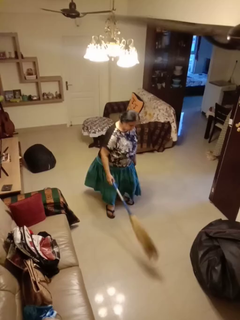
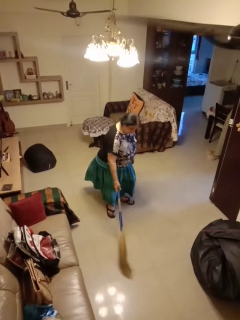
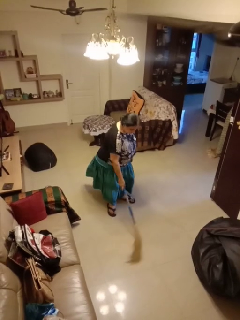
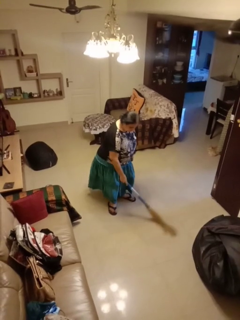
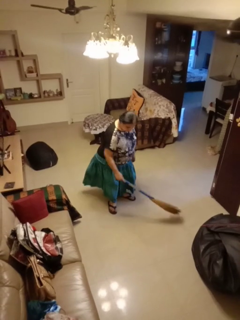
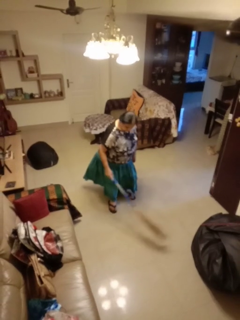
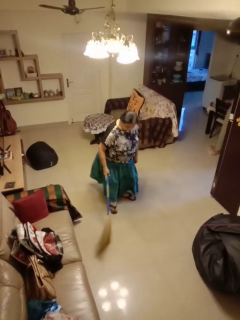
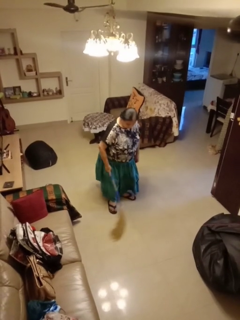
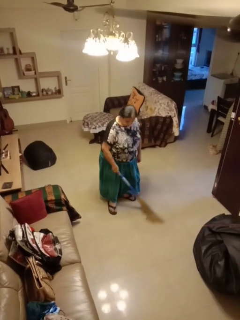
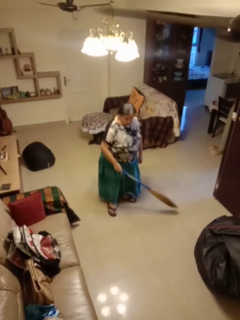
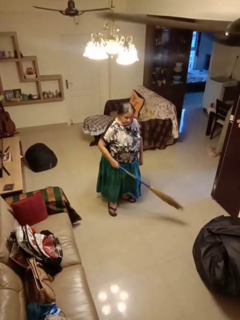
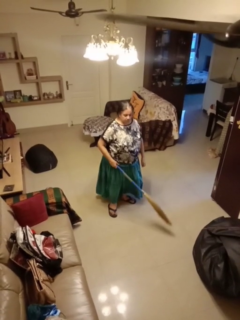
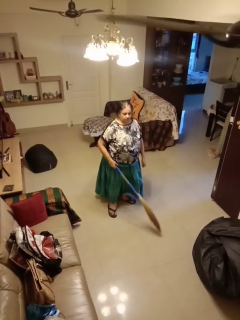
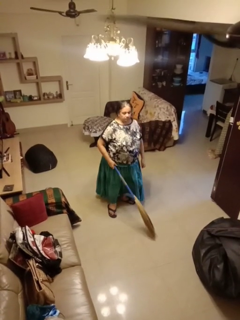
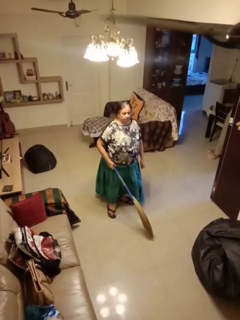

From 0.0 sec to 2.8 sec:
person sweeps floor

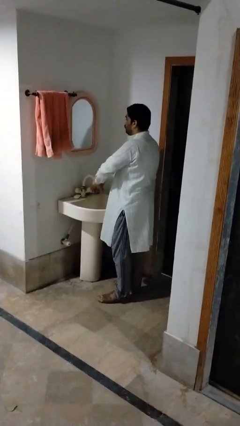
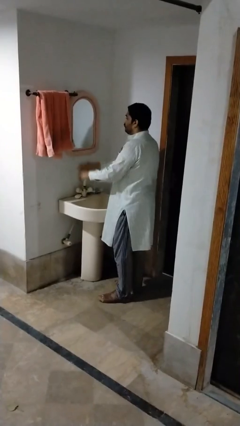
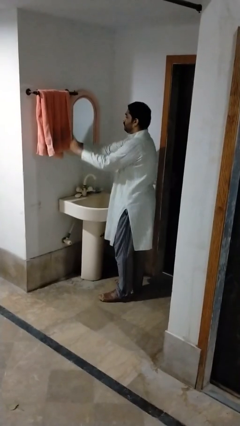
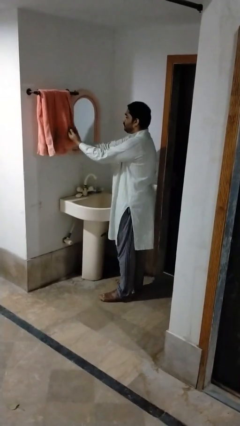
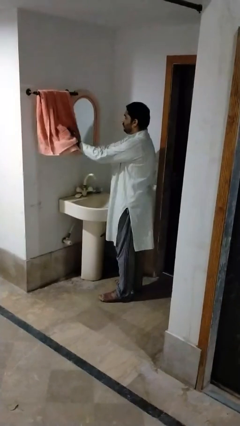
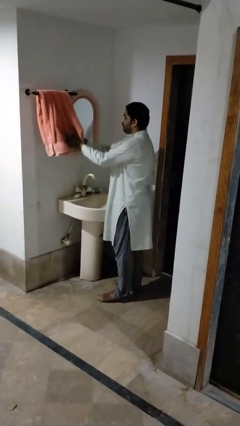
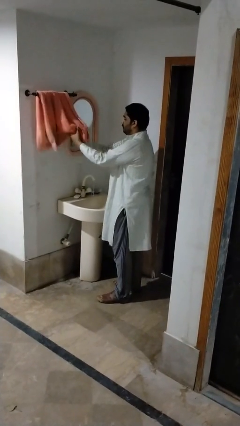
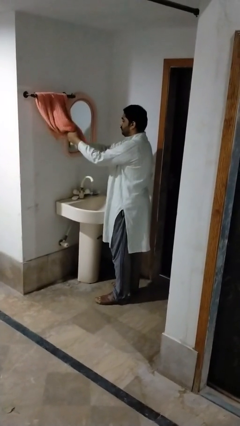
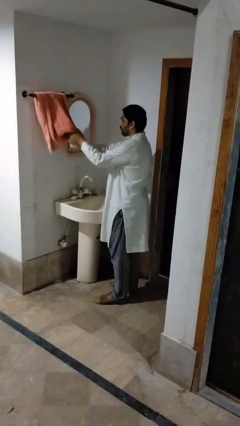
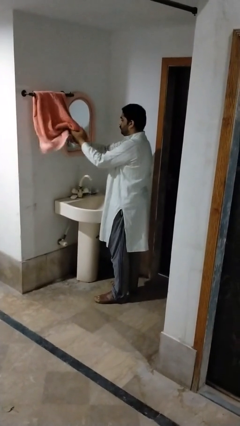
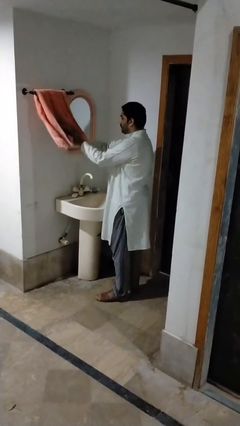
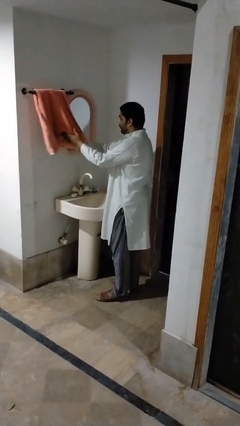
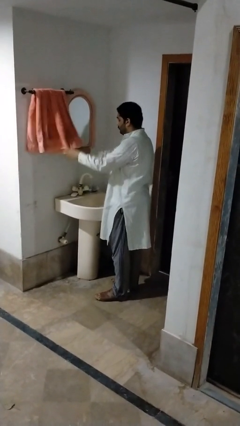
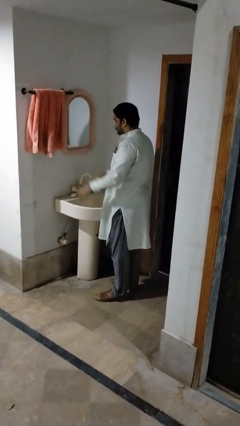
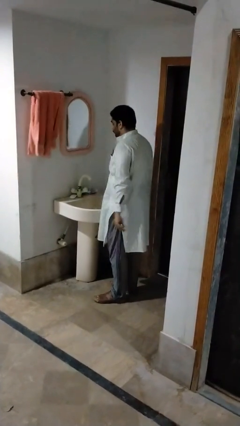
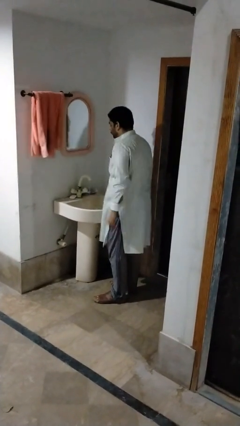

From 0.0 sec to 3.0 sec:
person dries hands with towel

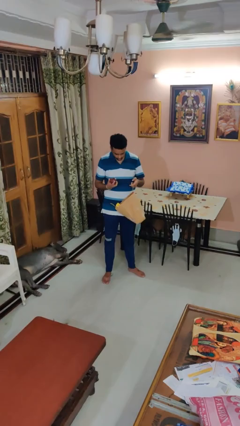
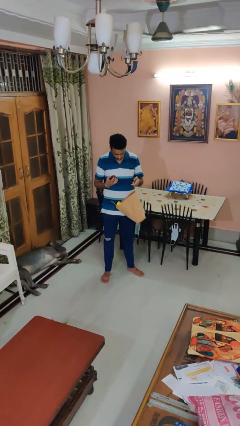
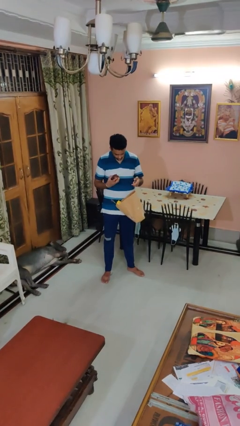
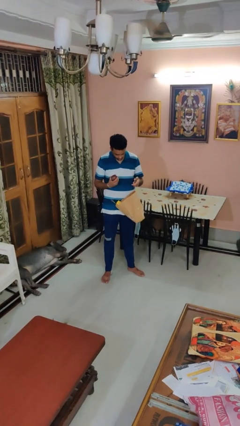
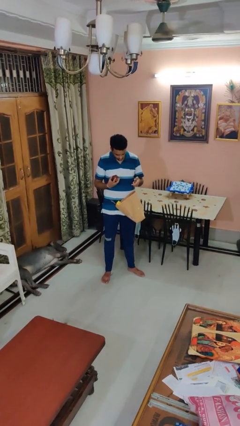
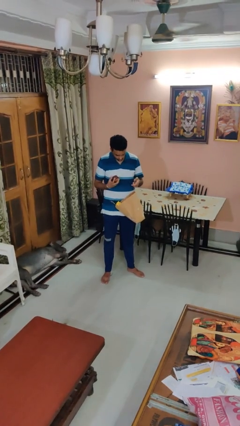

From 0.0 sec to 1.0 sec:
person takes object from bag

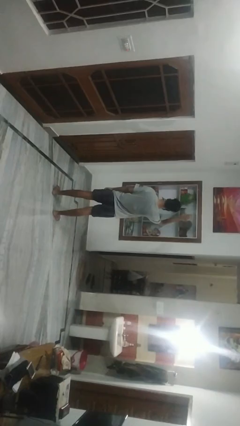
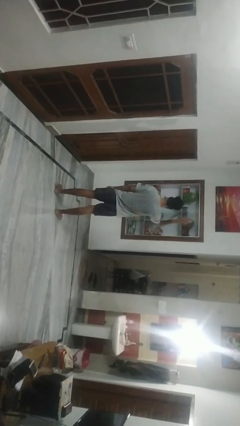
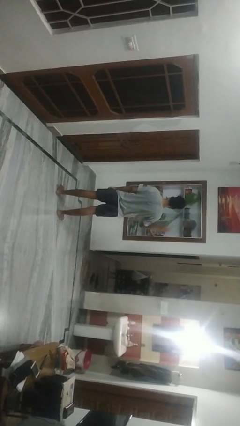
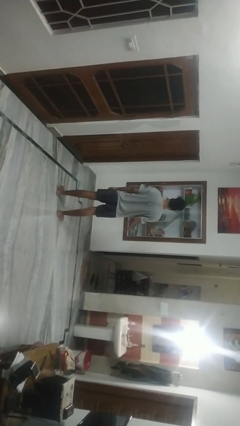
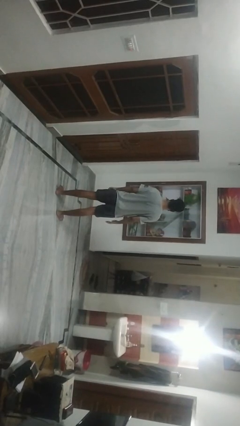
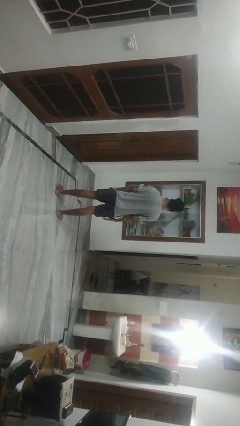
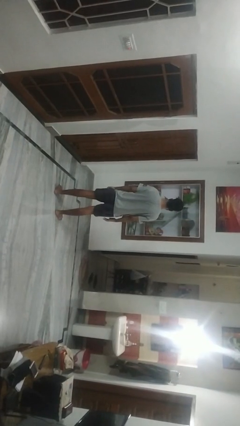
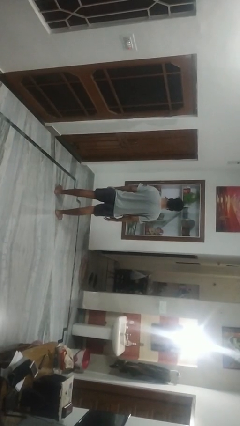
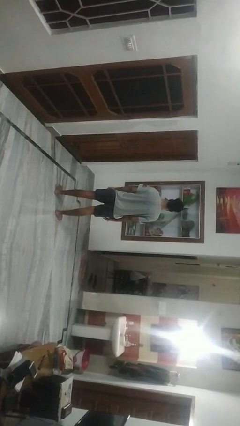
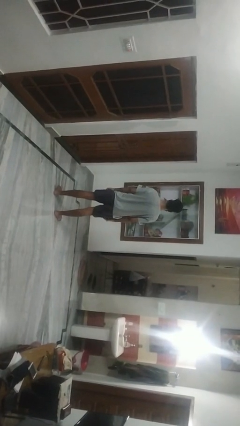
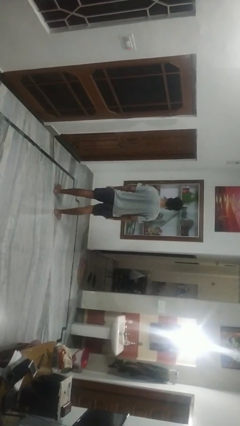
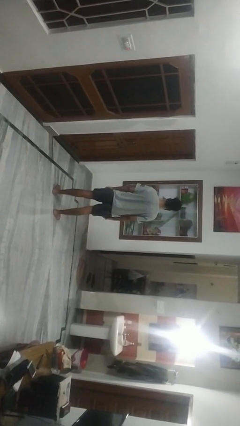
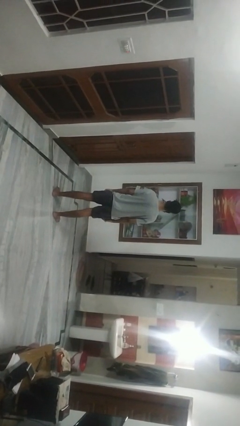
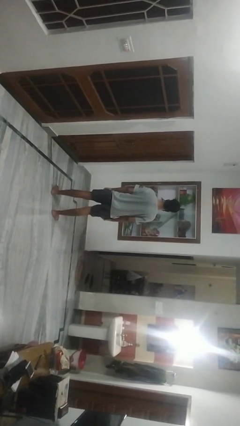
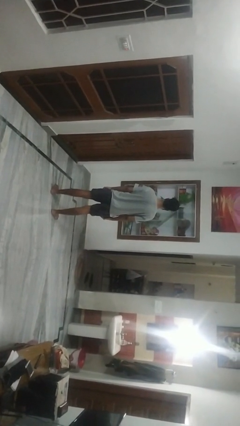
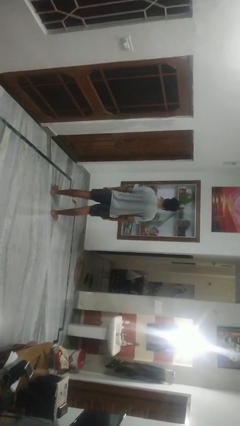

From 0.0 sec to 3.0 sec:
person gestures lower hand

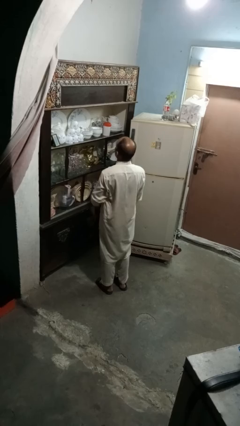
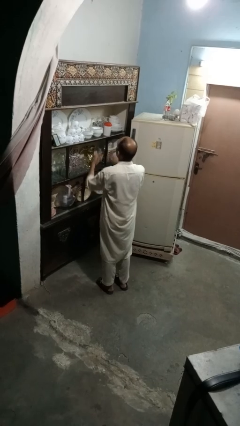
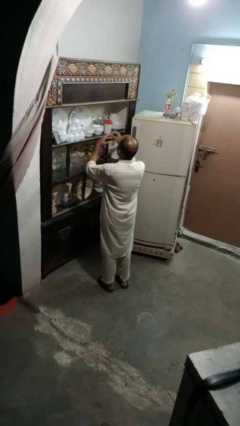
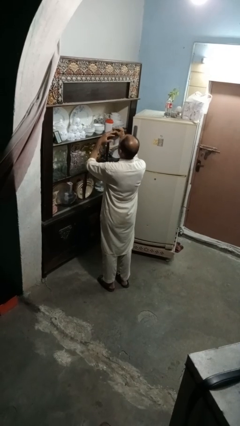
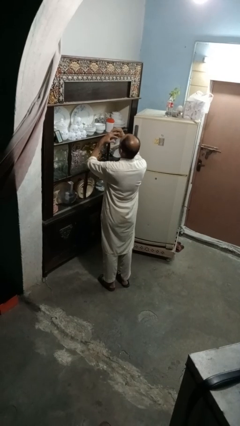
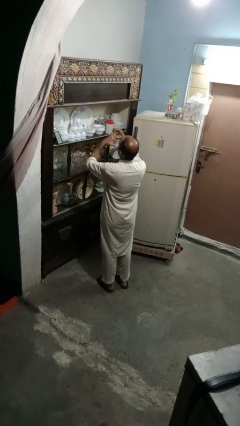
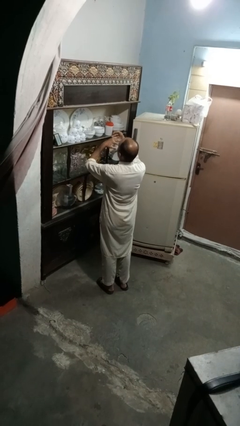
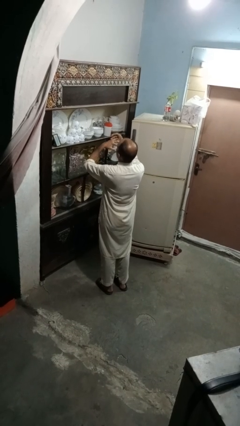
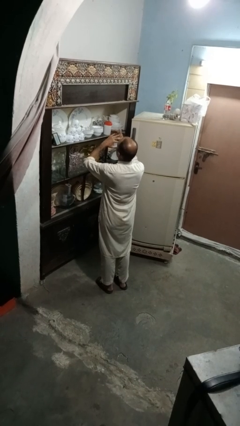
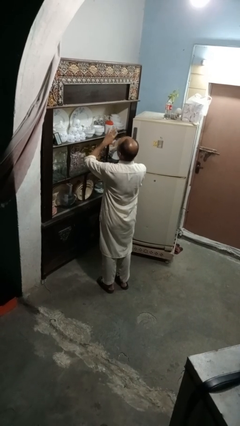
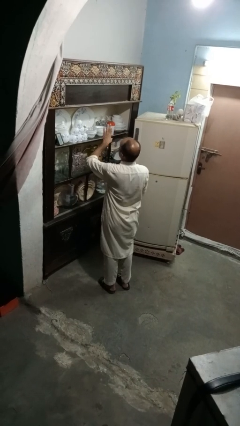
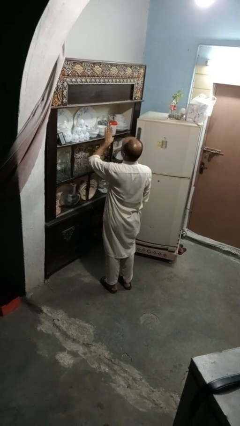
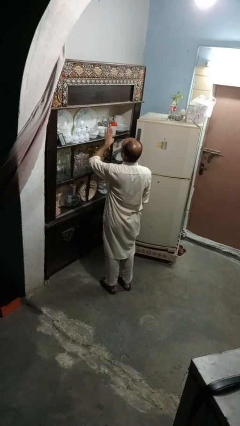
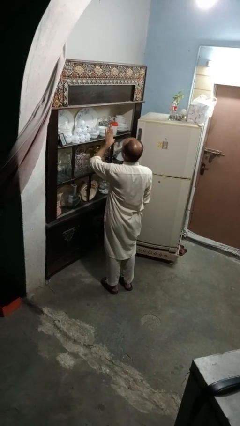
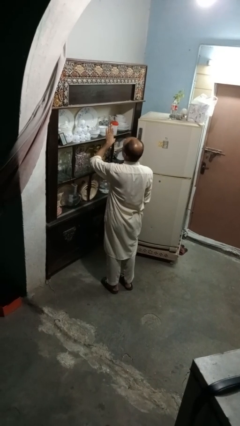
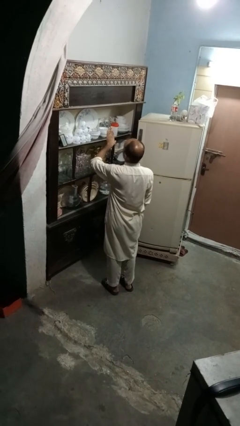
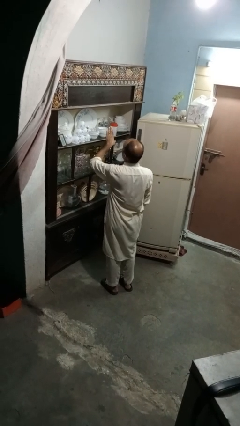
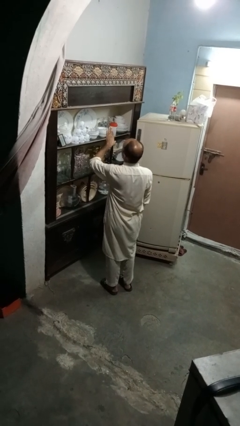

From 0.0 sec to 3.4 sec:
person puts on ring

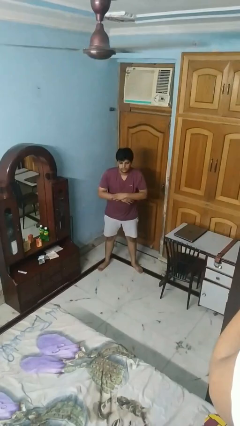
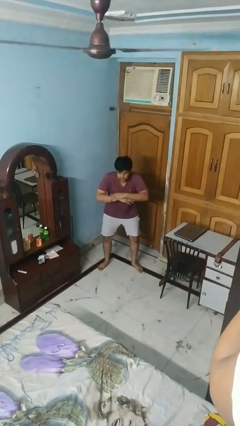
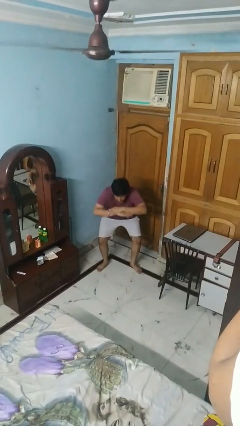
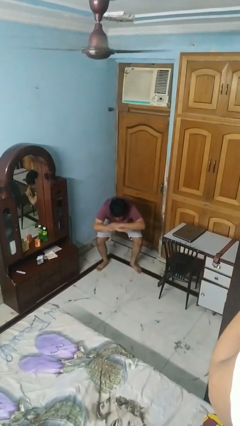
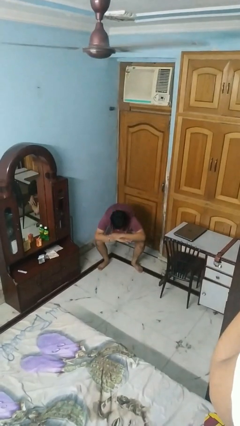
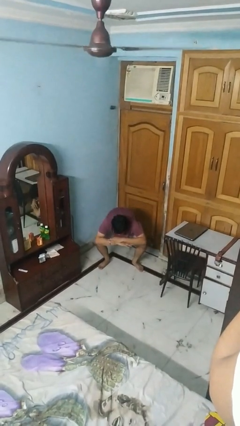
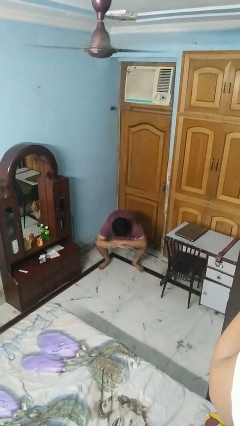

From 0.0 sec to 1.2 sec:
person squats

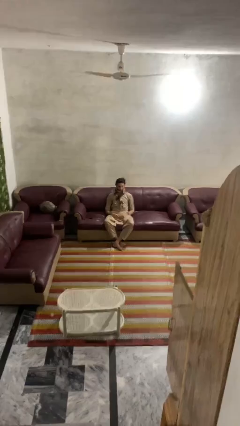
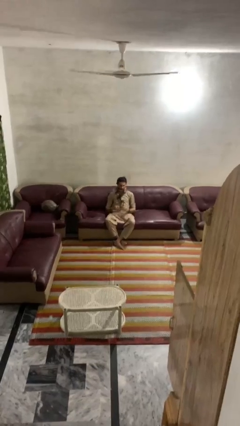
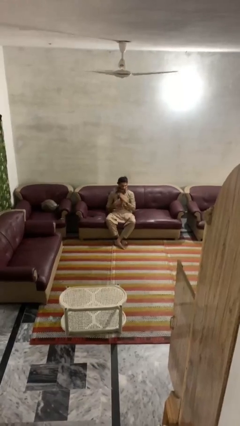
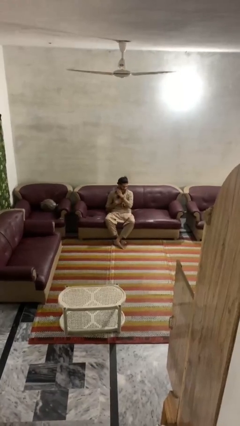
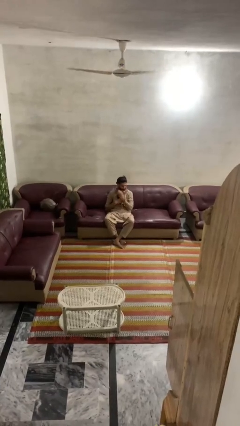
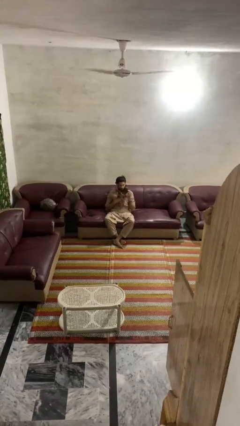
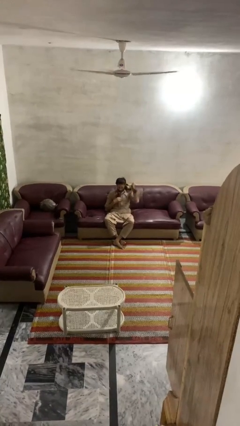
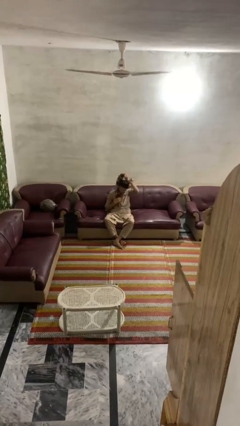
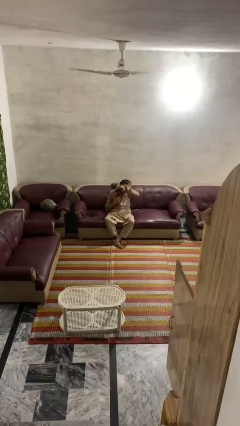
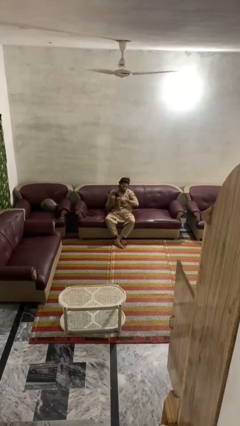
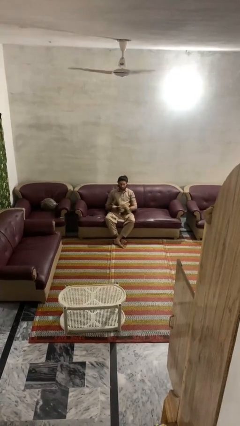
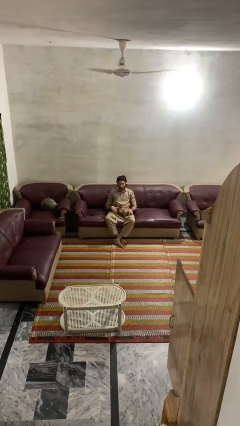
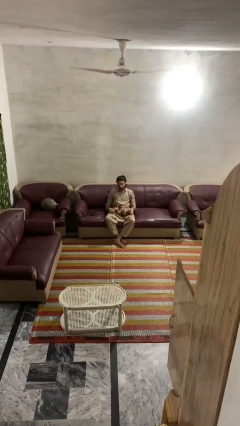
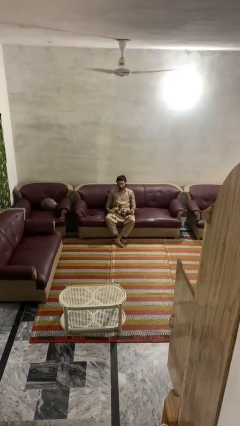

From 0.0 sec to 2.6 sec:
person takes off scarf

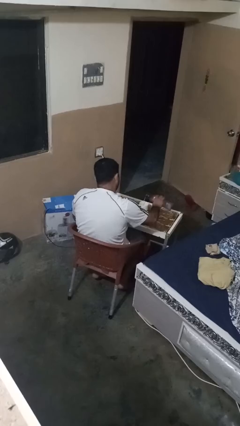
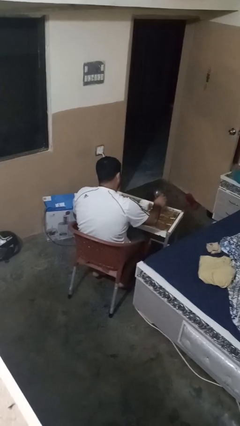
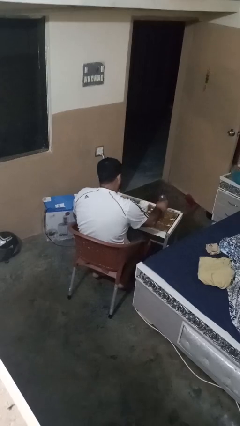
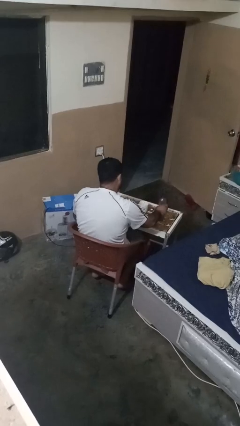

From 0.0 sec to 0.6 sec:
person screws lid to bottle
